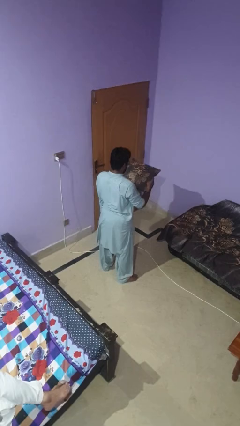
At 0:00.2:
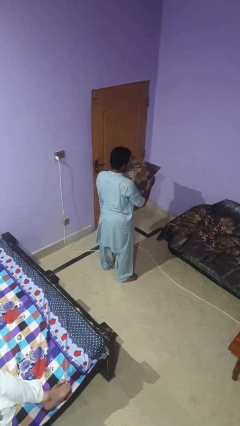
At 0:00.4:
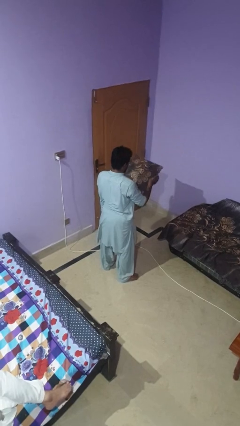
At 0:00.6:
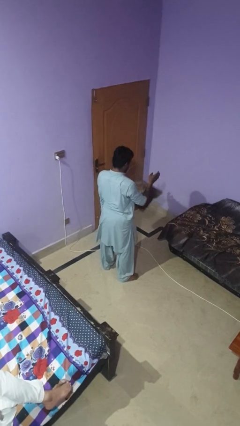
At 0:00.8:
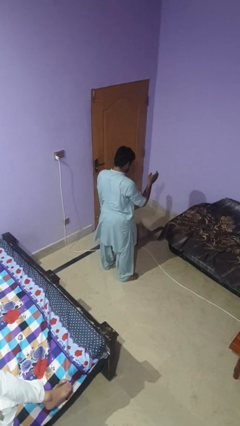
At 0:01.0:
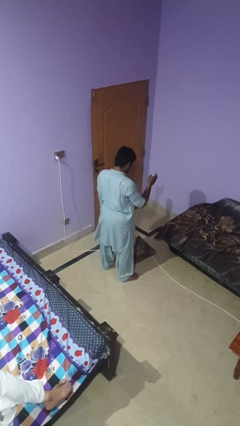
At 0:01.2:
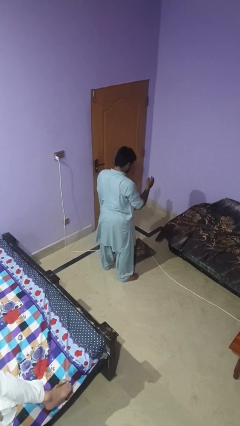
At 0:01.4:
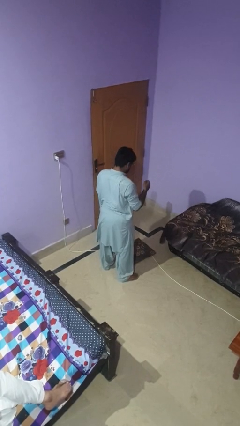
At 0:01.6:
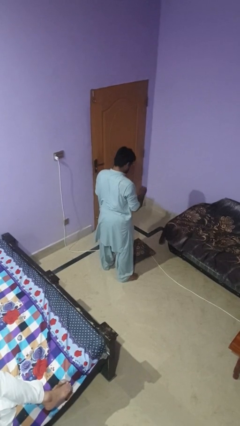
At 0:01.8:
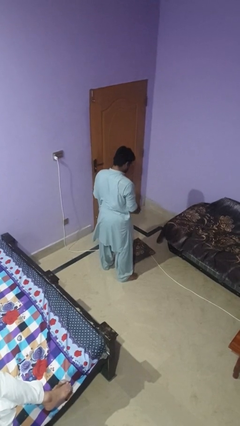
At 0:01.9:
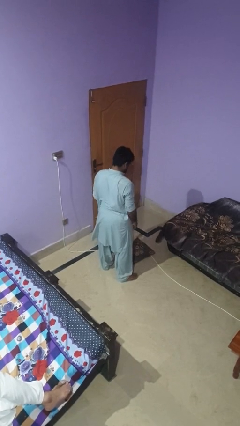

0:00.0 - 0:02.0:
person drops object

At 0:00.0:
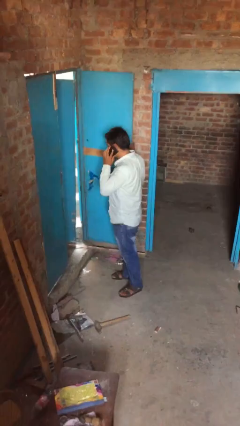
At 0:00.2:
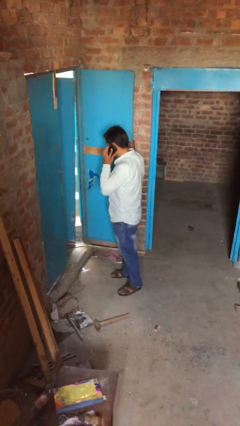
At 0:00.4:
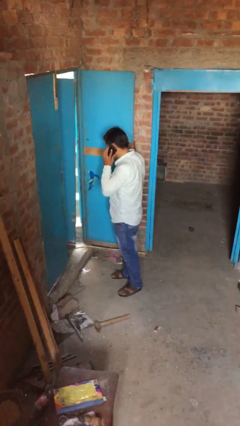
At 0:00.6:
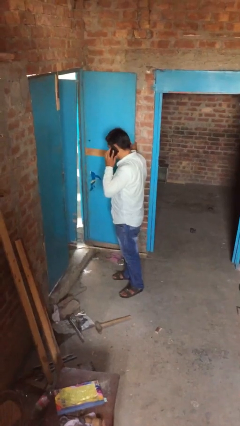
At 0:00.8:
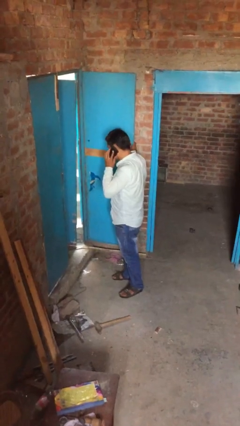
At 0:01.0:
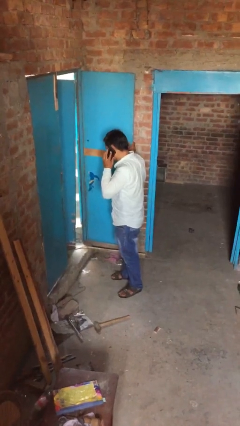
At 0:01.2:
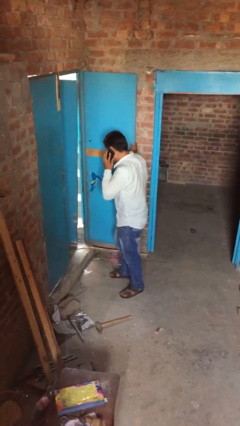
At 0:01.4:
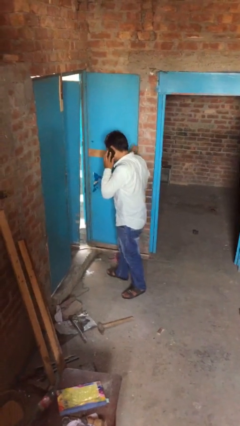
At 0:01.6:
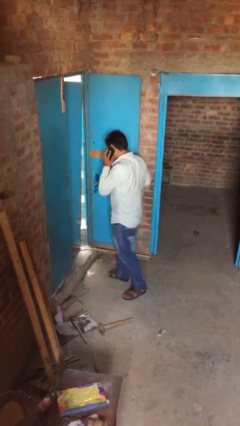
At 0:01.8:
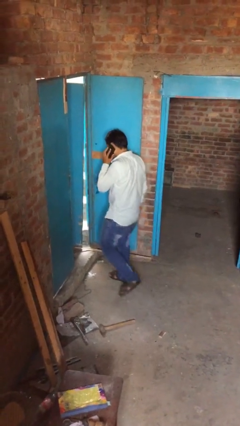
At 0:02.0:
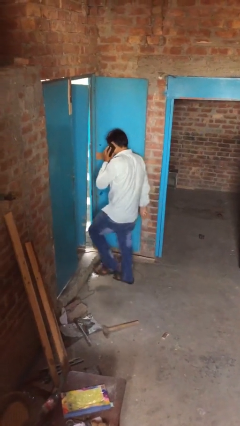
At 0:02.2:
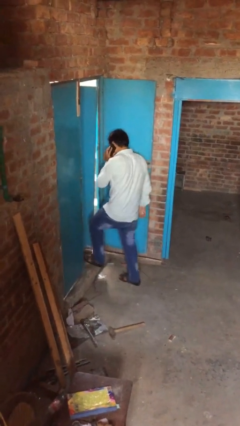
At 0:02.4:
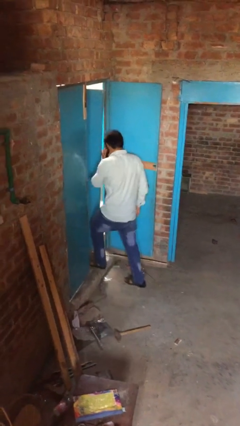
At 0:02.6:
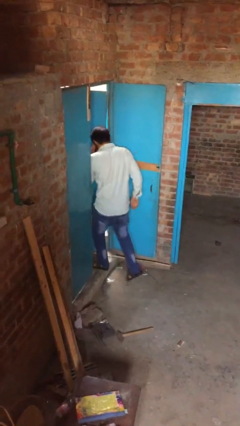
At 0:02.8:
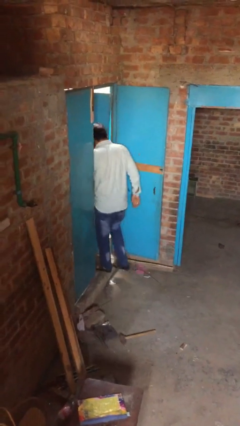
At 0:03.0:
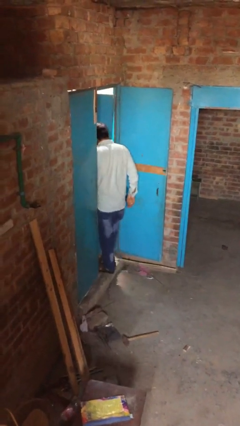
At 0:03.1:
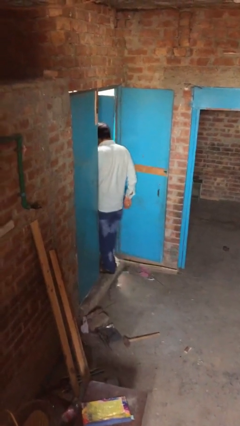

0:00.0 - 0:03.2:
person exits scene through structure

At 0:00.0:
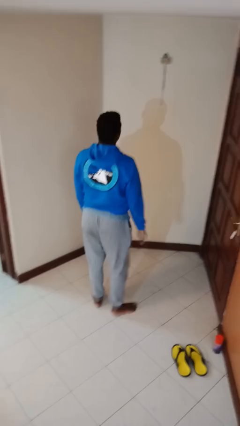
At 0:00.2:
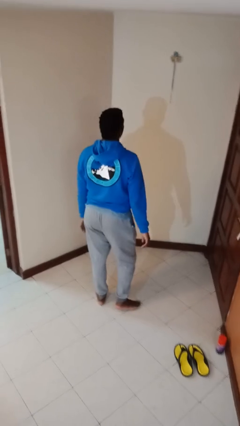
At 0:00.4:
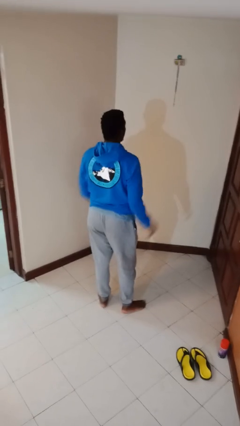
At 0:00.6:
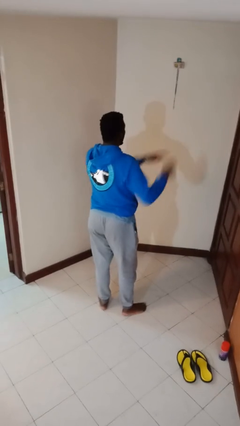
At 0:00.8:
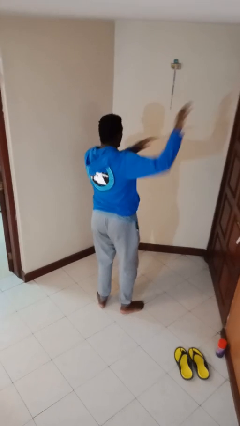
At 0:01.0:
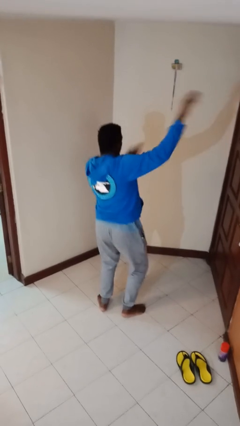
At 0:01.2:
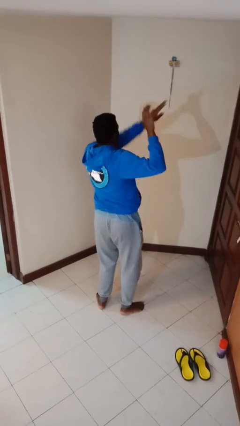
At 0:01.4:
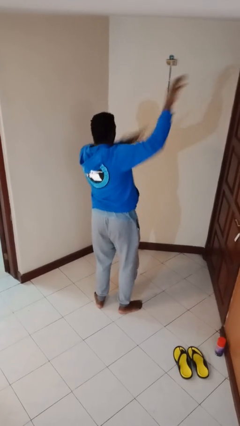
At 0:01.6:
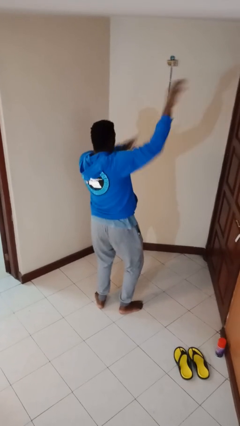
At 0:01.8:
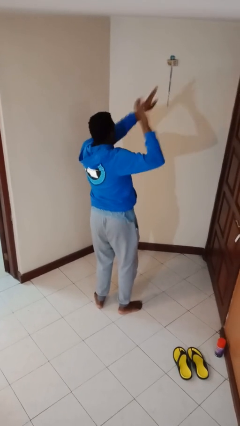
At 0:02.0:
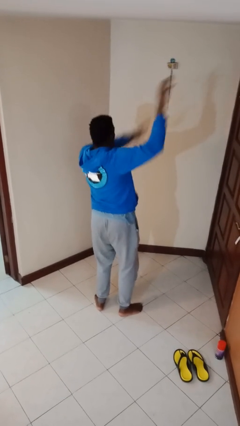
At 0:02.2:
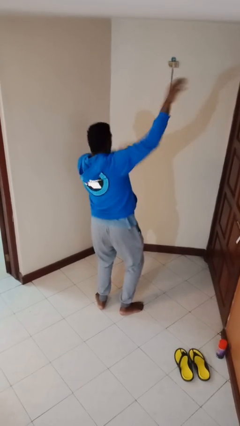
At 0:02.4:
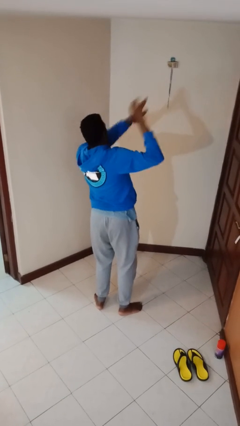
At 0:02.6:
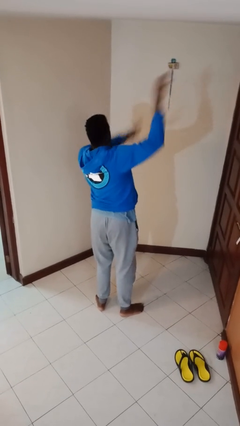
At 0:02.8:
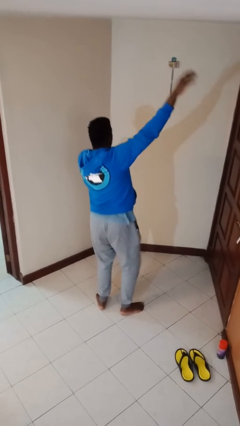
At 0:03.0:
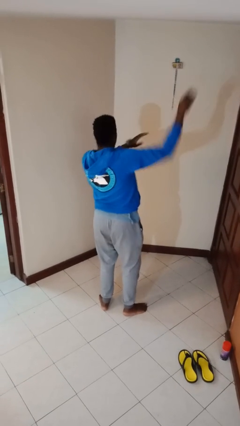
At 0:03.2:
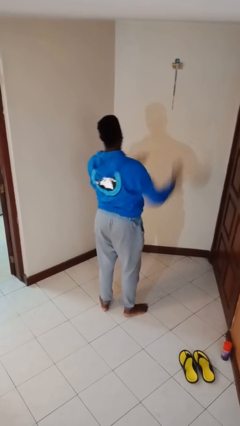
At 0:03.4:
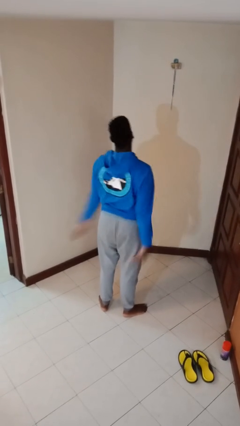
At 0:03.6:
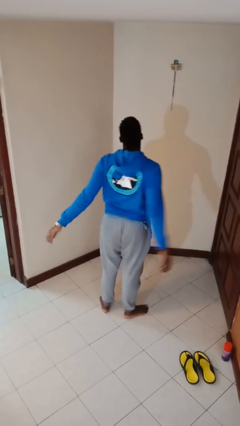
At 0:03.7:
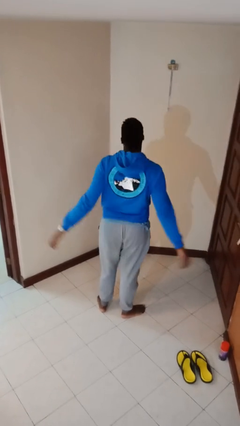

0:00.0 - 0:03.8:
person dances in place

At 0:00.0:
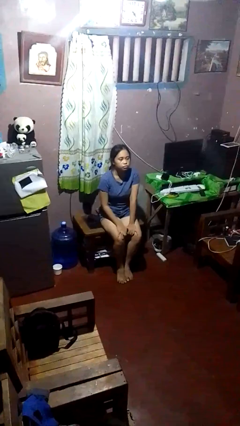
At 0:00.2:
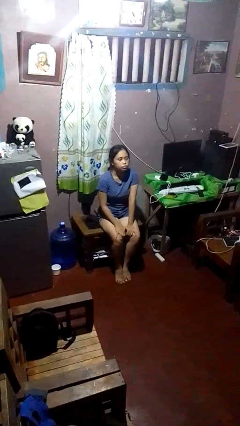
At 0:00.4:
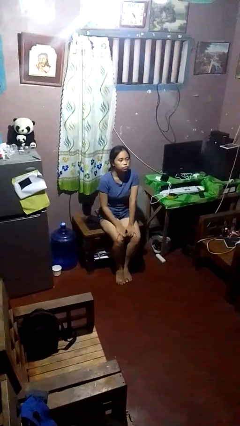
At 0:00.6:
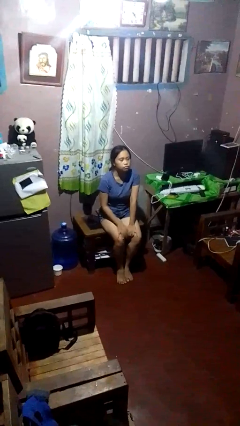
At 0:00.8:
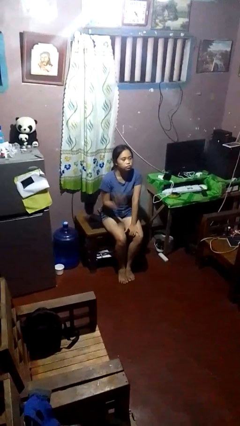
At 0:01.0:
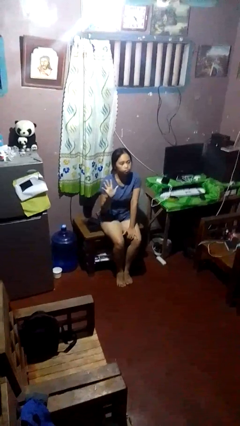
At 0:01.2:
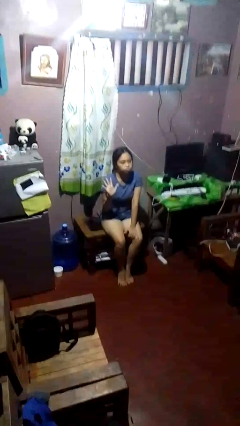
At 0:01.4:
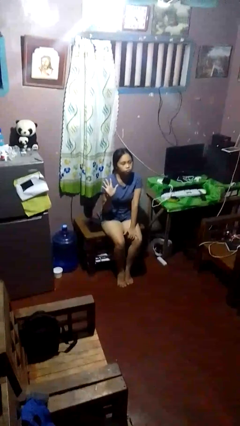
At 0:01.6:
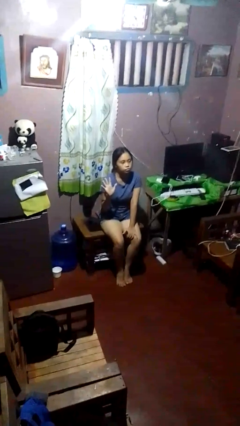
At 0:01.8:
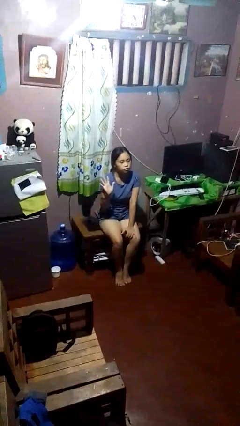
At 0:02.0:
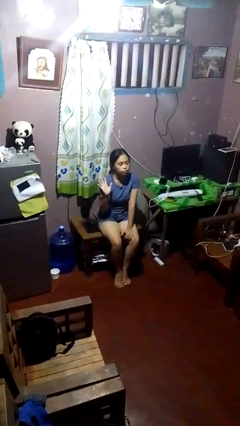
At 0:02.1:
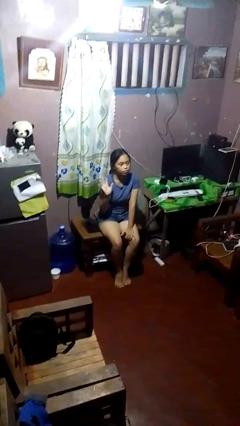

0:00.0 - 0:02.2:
person gestures number five

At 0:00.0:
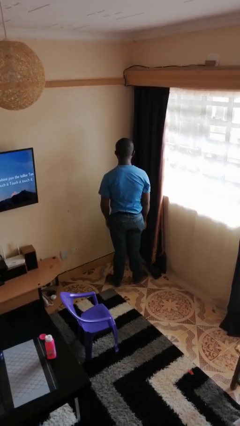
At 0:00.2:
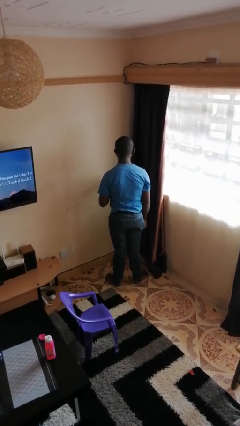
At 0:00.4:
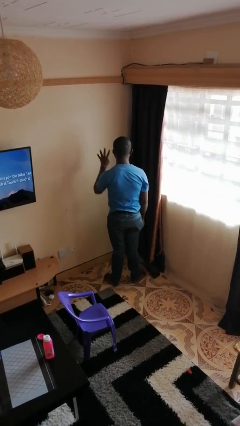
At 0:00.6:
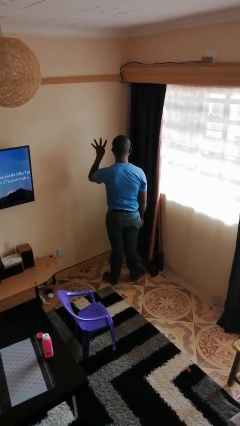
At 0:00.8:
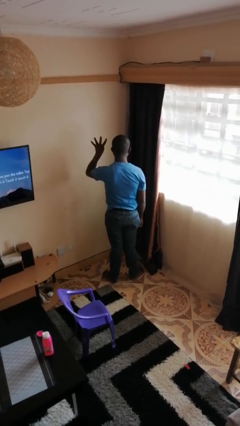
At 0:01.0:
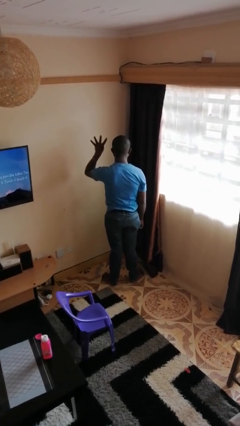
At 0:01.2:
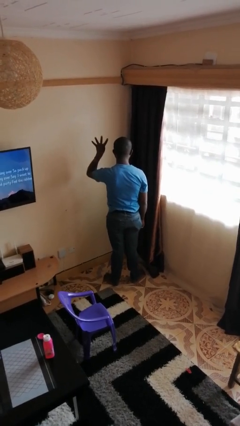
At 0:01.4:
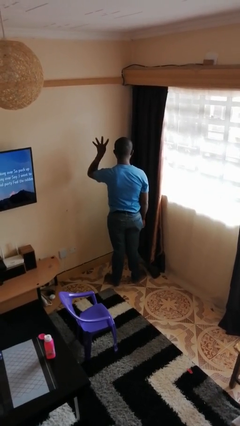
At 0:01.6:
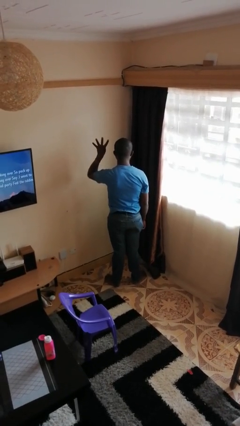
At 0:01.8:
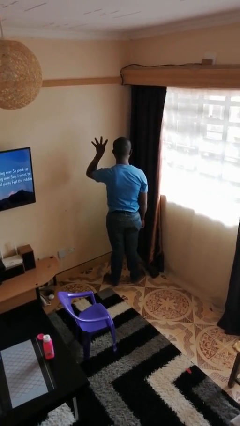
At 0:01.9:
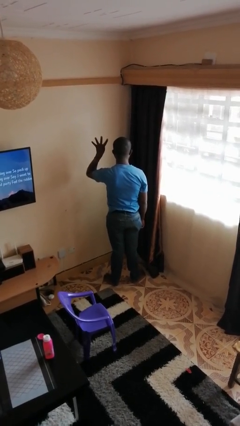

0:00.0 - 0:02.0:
person gestures number four

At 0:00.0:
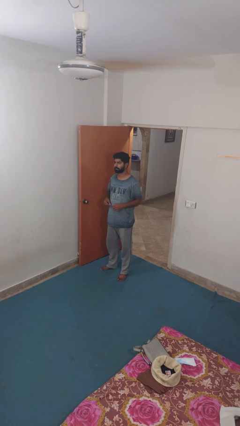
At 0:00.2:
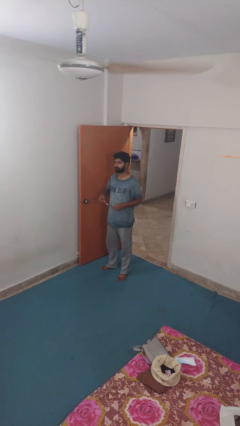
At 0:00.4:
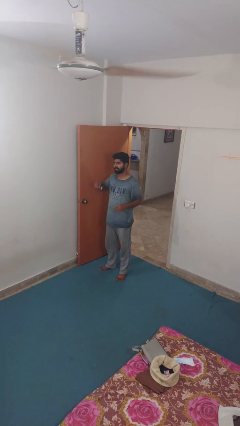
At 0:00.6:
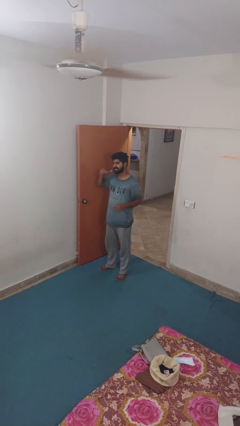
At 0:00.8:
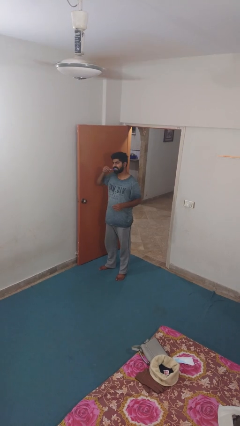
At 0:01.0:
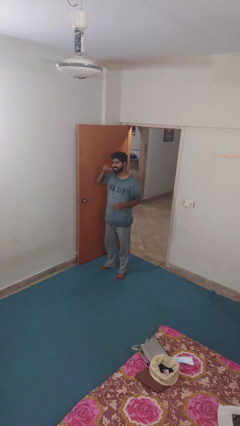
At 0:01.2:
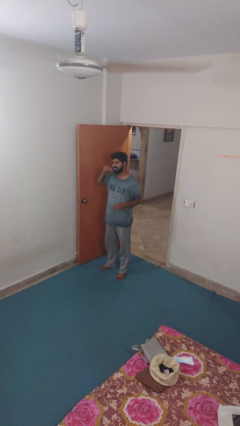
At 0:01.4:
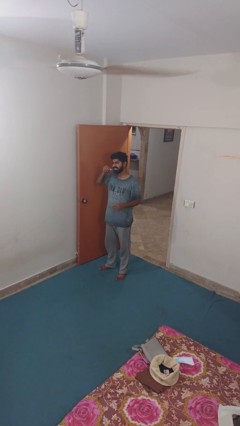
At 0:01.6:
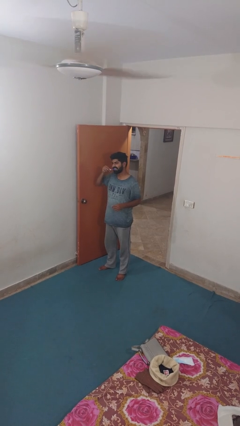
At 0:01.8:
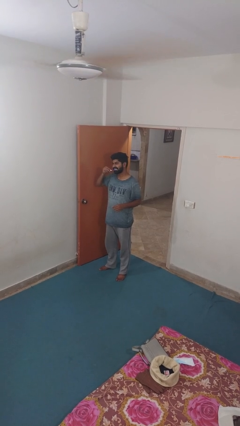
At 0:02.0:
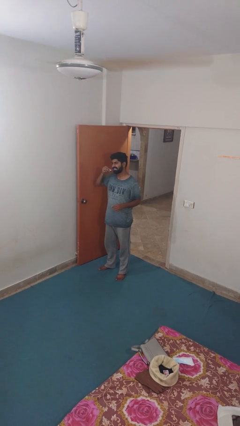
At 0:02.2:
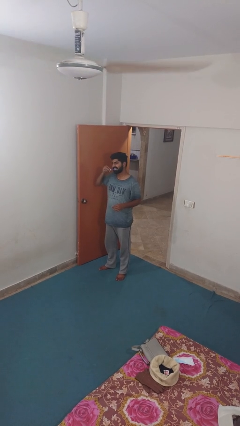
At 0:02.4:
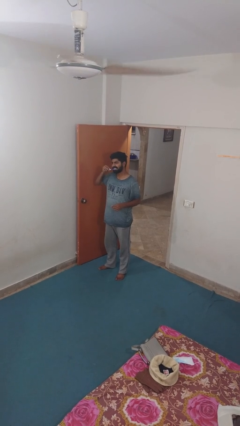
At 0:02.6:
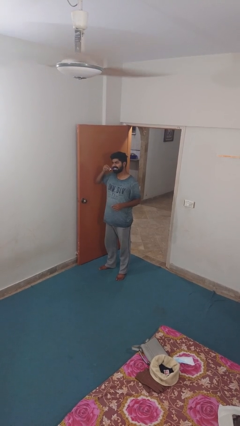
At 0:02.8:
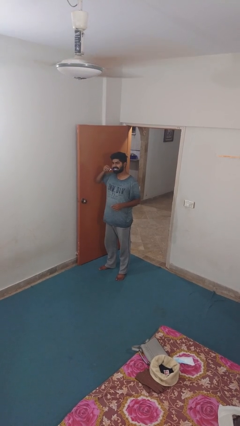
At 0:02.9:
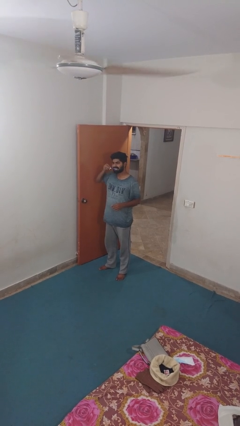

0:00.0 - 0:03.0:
person brushes teeth

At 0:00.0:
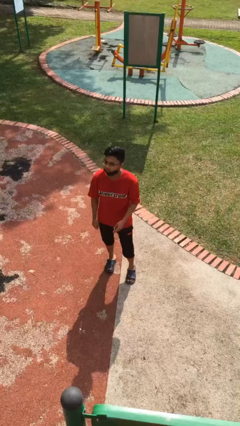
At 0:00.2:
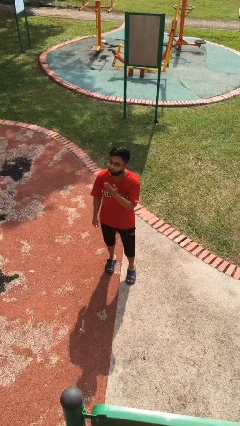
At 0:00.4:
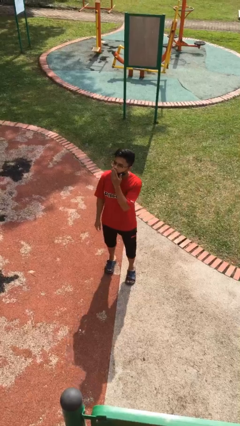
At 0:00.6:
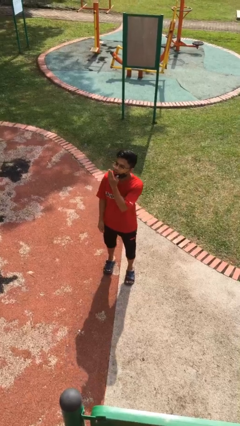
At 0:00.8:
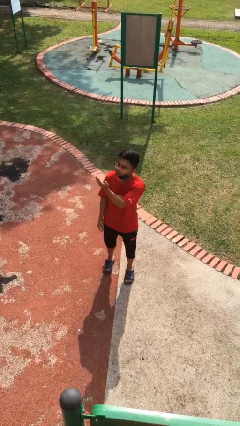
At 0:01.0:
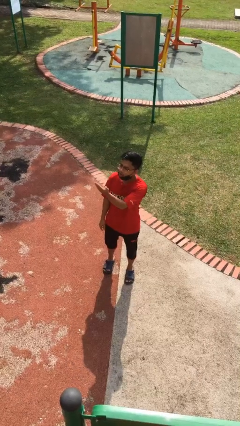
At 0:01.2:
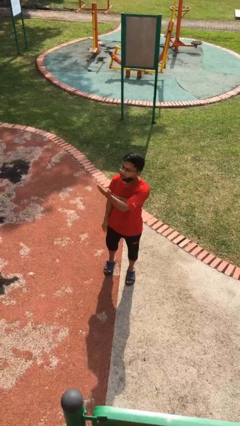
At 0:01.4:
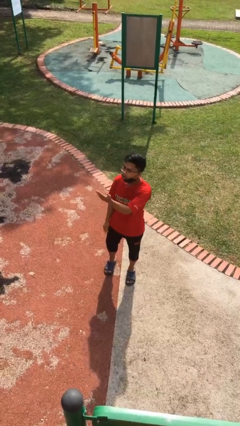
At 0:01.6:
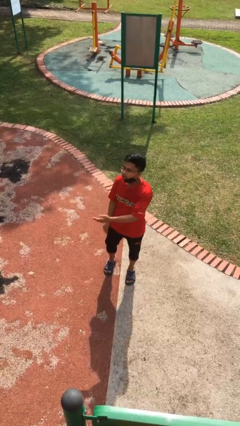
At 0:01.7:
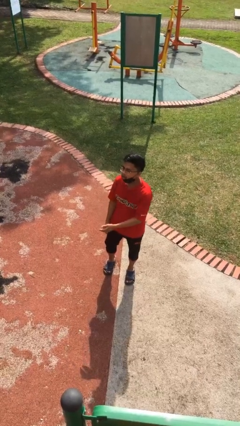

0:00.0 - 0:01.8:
person gestures blow kiss
